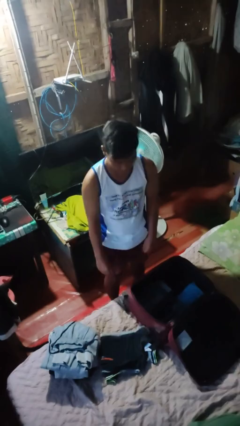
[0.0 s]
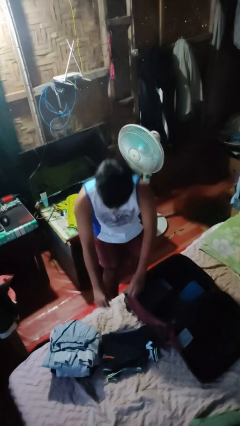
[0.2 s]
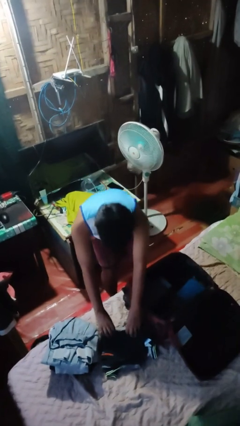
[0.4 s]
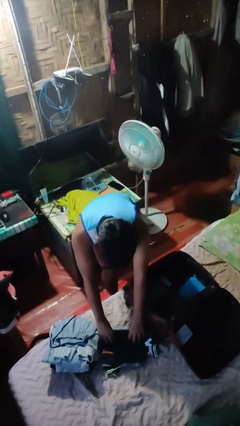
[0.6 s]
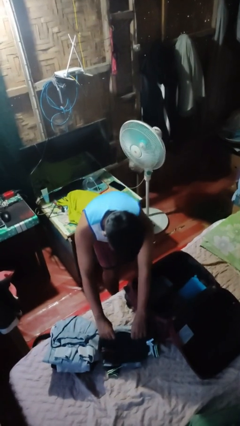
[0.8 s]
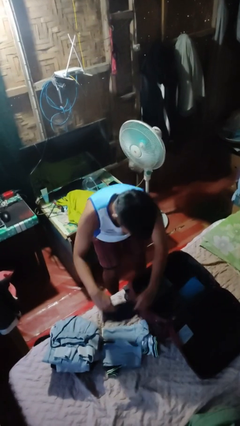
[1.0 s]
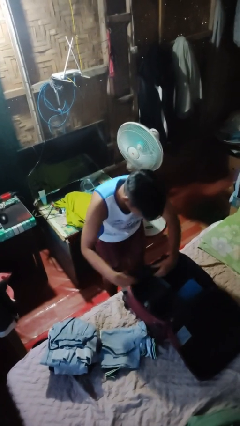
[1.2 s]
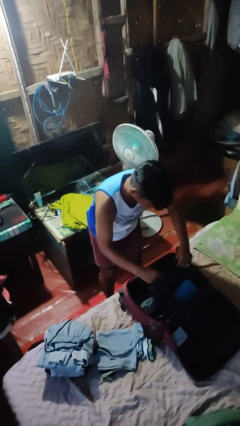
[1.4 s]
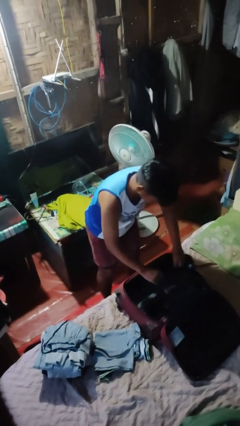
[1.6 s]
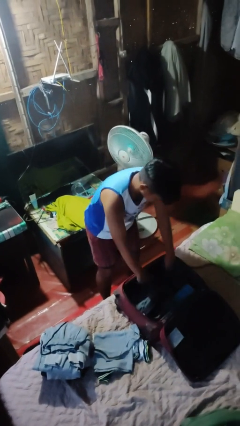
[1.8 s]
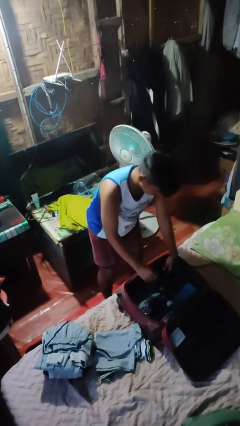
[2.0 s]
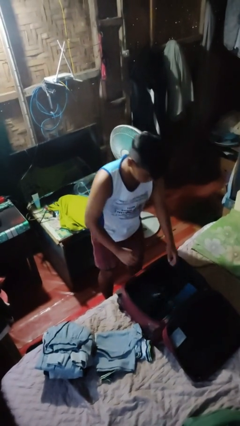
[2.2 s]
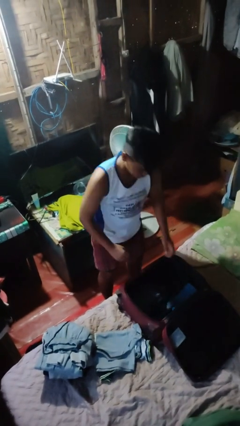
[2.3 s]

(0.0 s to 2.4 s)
person loads clothes into suitcase

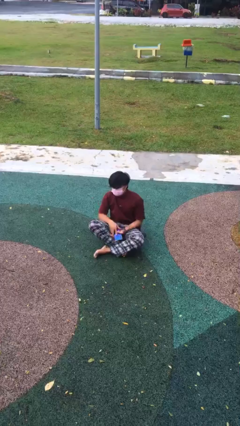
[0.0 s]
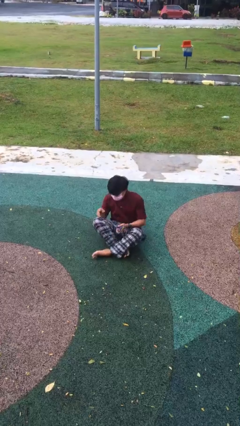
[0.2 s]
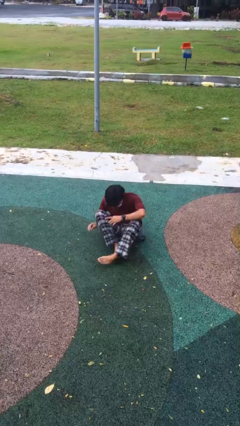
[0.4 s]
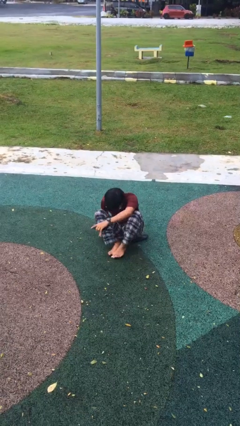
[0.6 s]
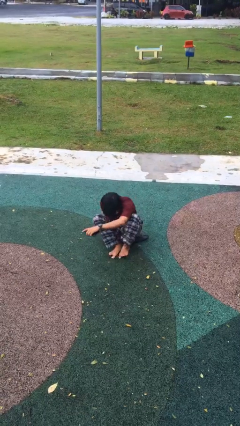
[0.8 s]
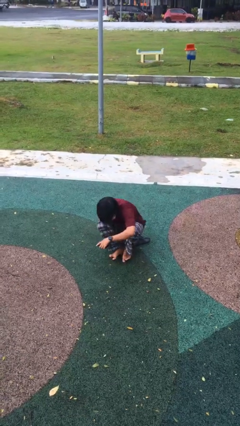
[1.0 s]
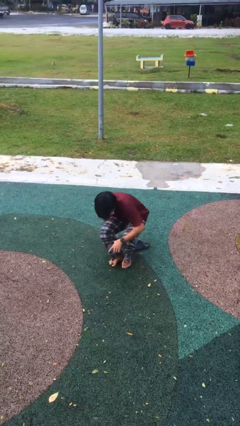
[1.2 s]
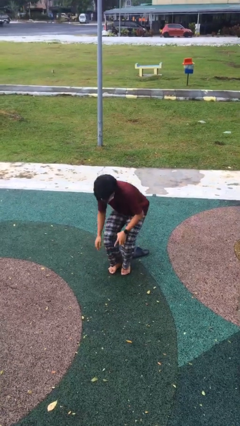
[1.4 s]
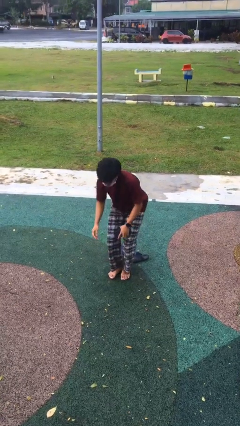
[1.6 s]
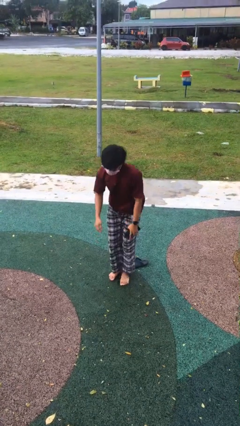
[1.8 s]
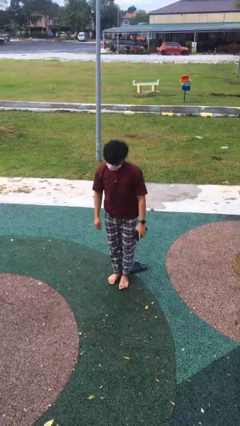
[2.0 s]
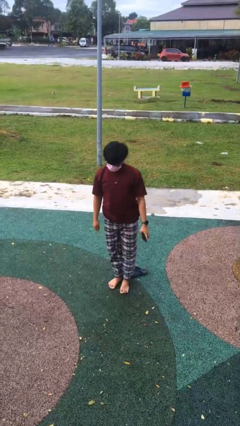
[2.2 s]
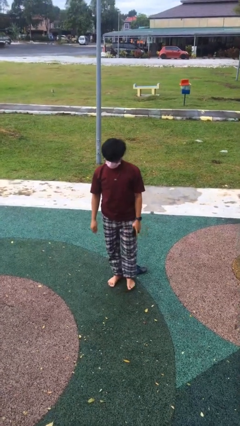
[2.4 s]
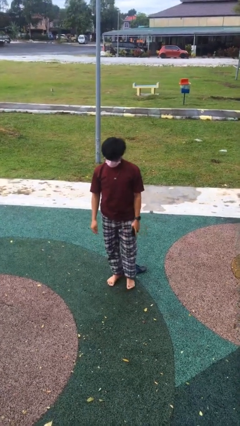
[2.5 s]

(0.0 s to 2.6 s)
person stands up from floor

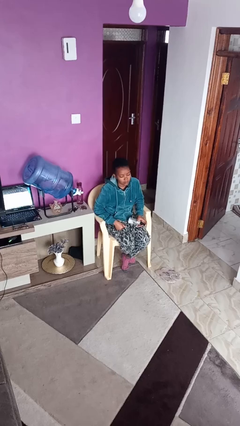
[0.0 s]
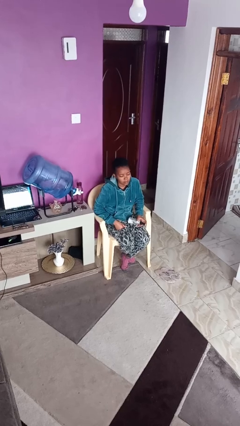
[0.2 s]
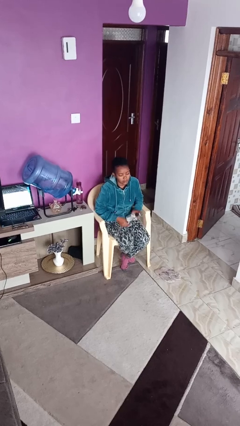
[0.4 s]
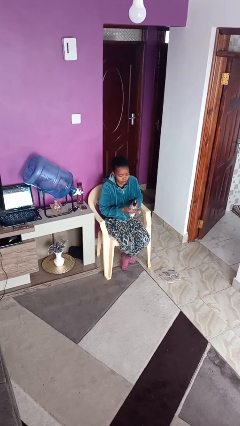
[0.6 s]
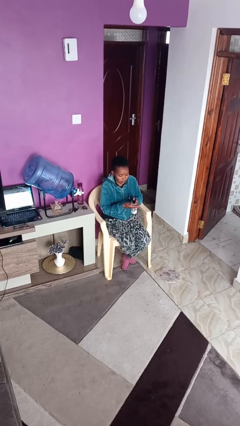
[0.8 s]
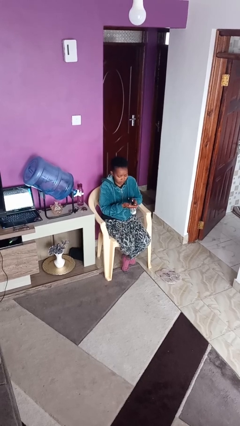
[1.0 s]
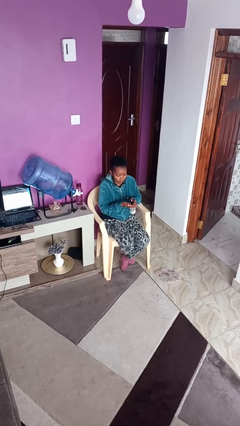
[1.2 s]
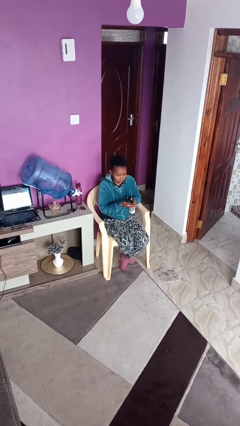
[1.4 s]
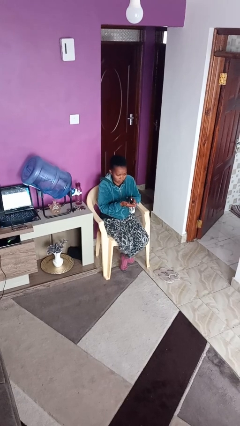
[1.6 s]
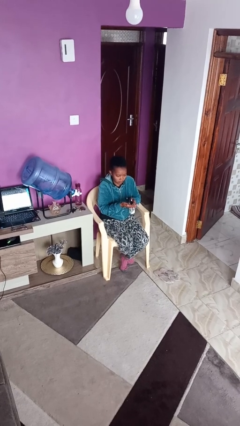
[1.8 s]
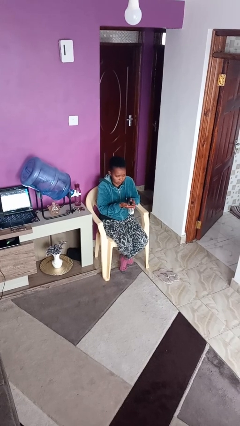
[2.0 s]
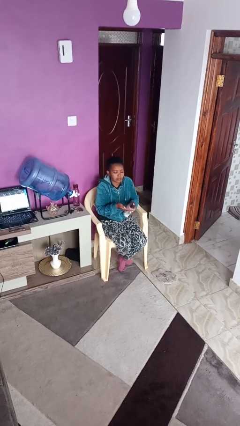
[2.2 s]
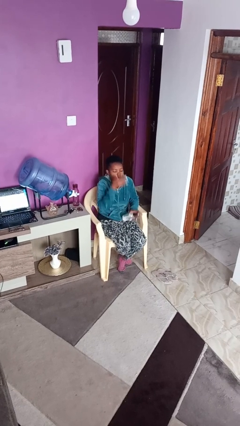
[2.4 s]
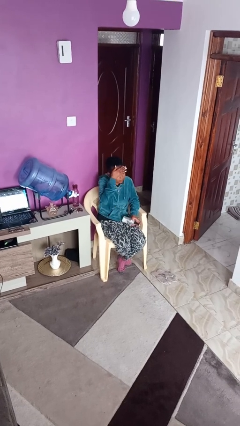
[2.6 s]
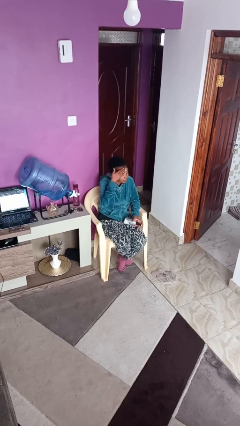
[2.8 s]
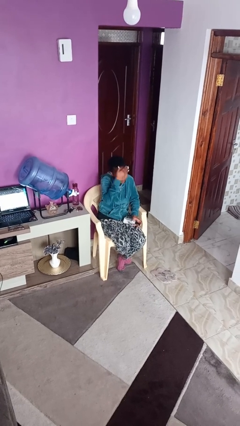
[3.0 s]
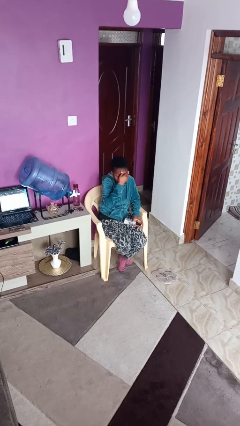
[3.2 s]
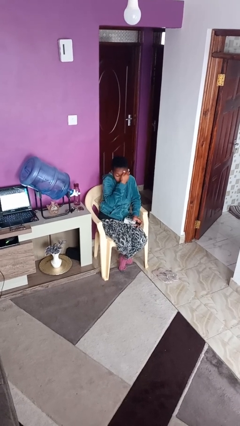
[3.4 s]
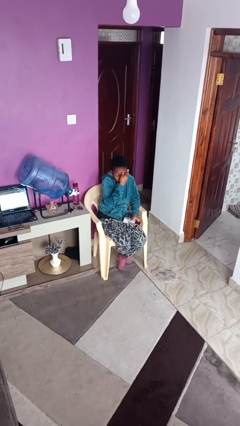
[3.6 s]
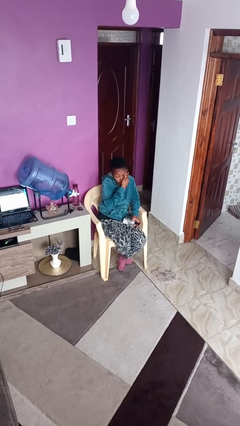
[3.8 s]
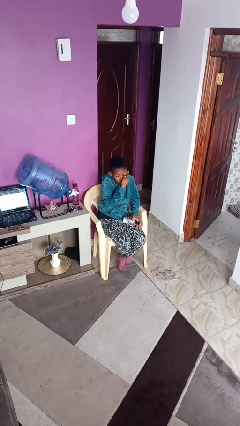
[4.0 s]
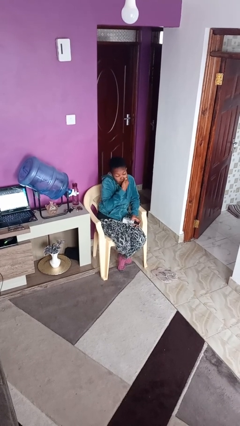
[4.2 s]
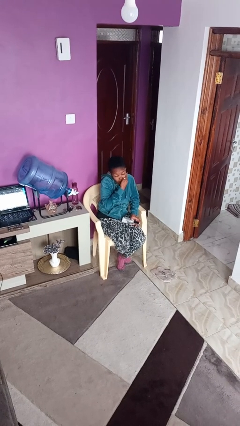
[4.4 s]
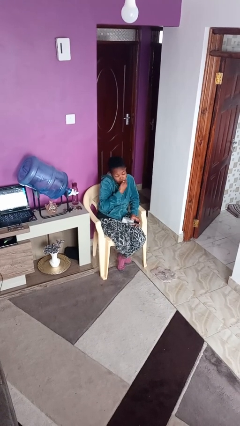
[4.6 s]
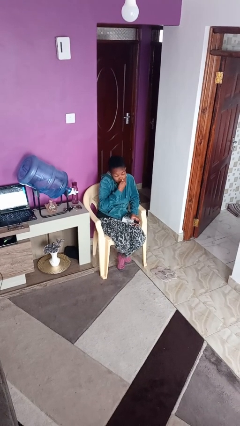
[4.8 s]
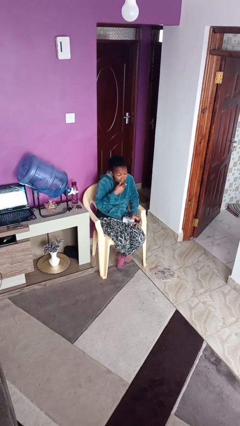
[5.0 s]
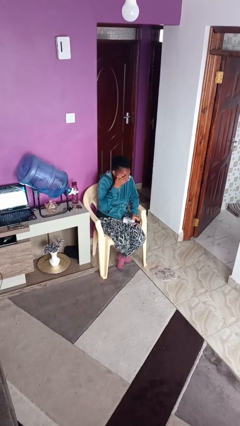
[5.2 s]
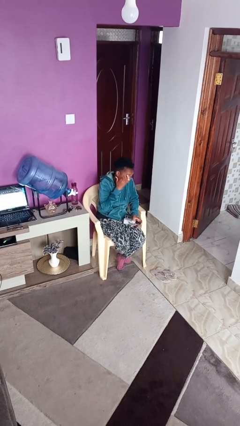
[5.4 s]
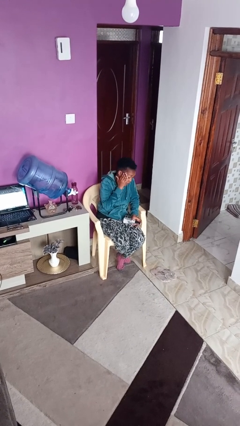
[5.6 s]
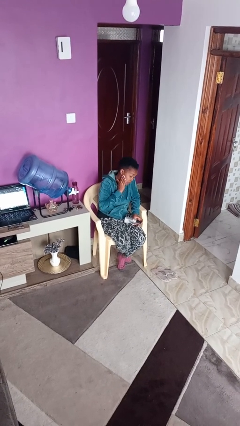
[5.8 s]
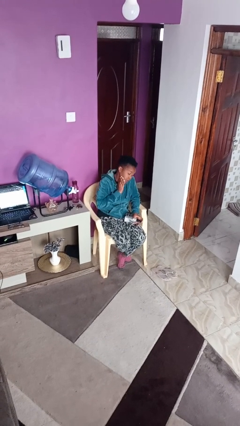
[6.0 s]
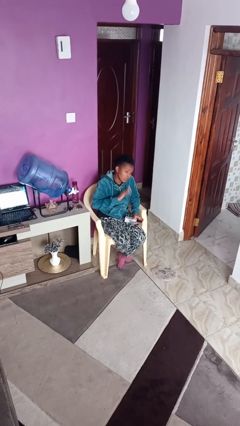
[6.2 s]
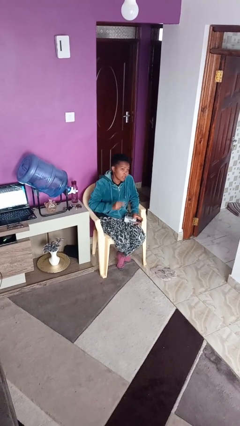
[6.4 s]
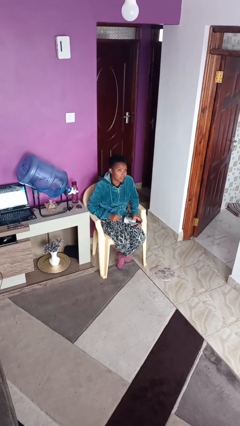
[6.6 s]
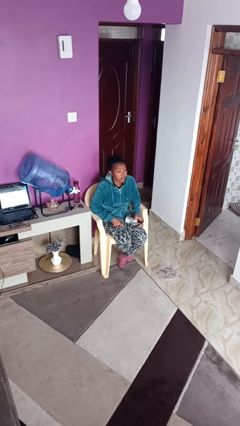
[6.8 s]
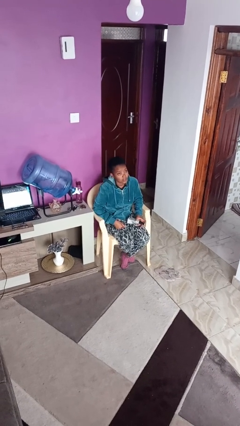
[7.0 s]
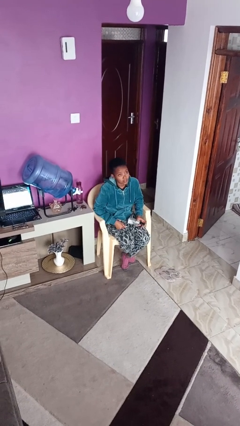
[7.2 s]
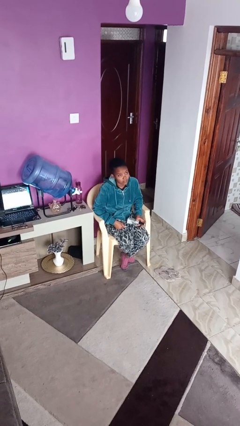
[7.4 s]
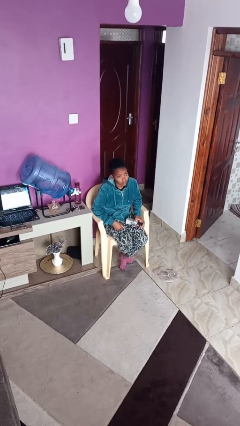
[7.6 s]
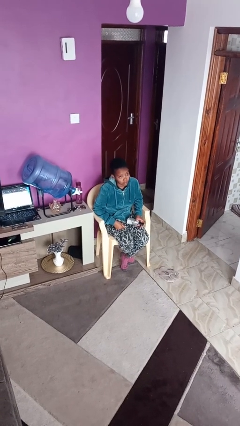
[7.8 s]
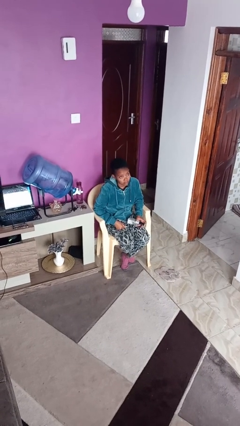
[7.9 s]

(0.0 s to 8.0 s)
person applies facial moisturizer

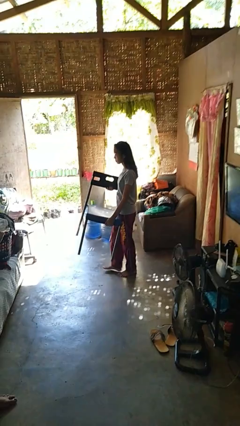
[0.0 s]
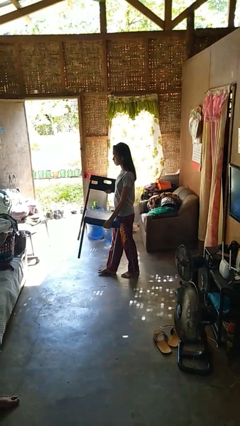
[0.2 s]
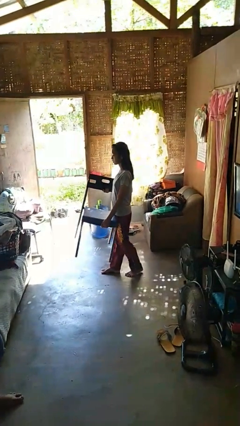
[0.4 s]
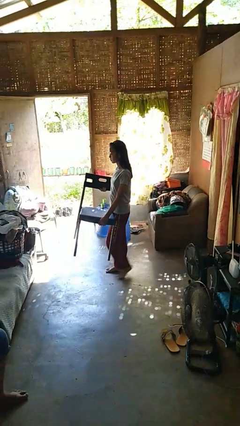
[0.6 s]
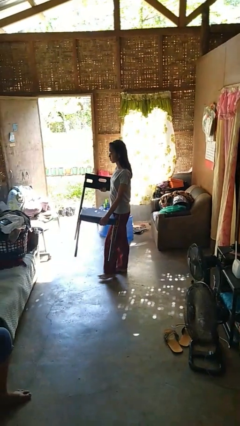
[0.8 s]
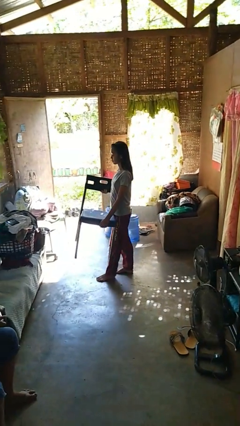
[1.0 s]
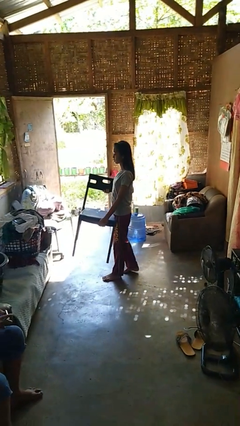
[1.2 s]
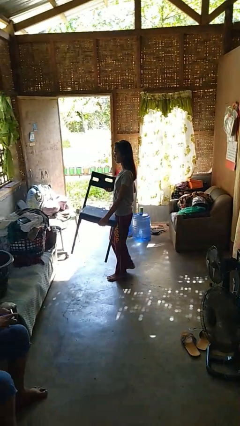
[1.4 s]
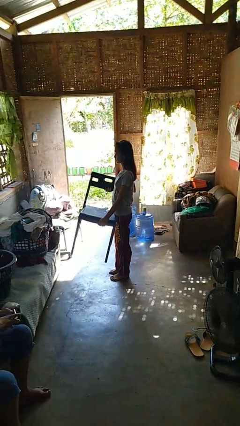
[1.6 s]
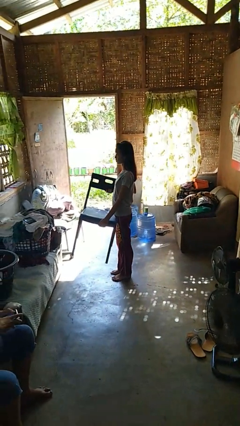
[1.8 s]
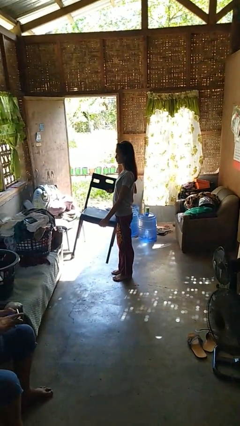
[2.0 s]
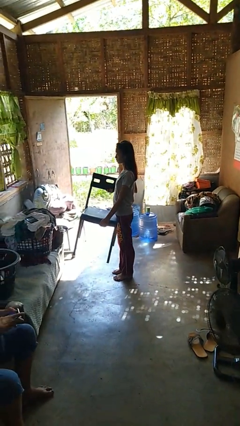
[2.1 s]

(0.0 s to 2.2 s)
person carries furniture

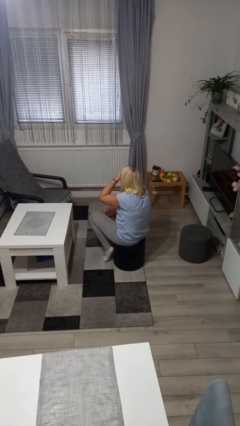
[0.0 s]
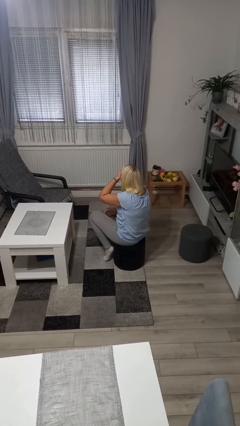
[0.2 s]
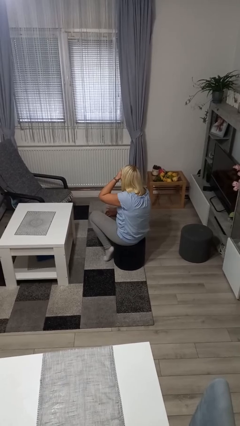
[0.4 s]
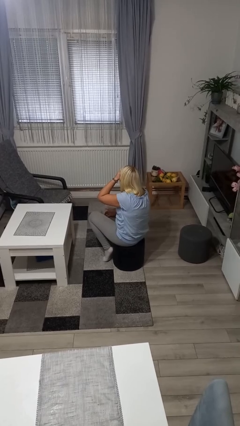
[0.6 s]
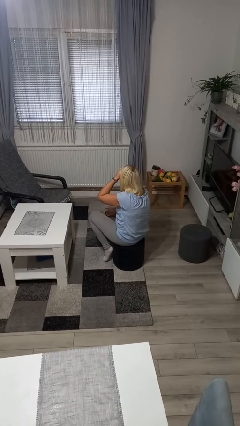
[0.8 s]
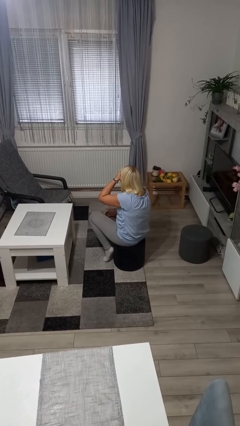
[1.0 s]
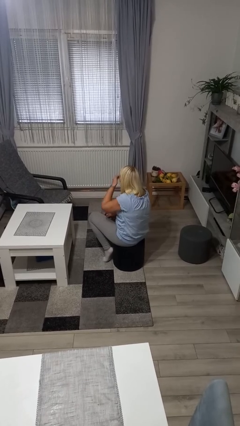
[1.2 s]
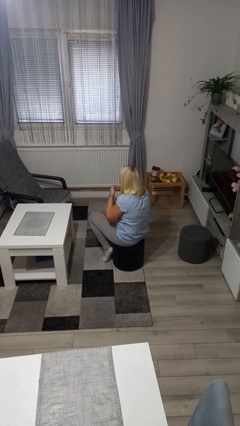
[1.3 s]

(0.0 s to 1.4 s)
person shades eyes

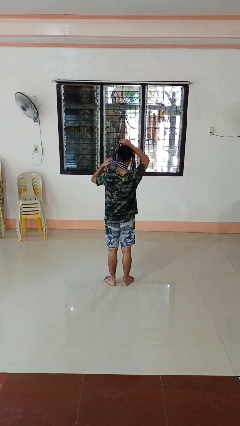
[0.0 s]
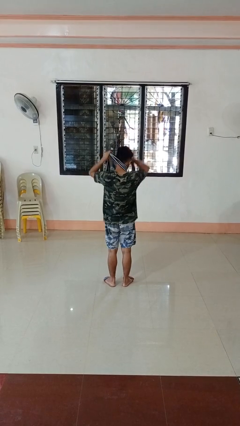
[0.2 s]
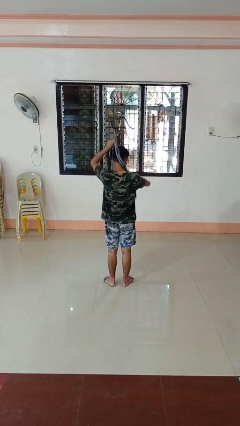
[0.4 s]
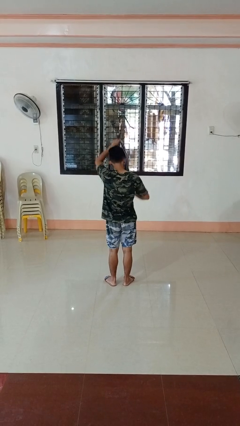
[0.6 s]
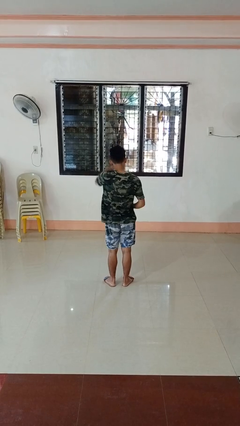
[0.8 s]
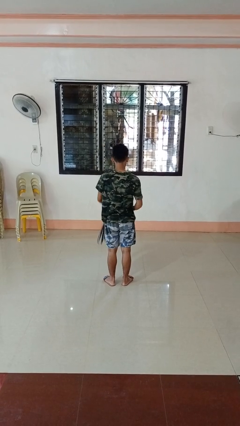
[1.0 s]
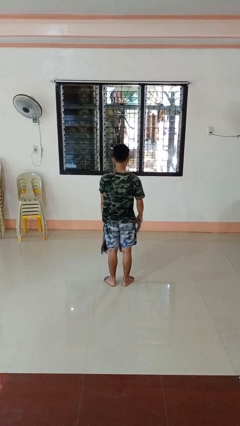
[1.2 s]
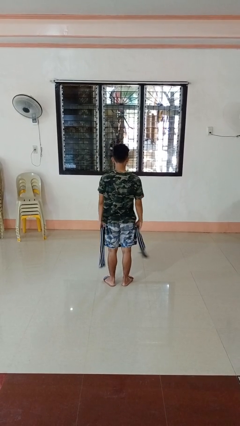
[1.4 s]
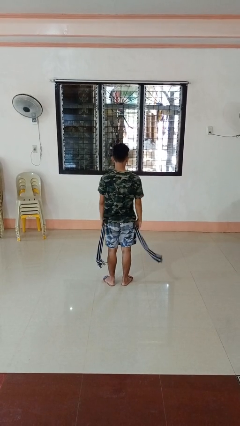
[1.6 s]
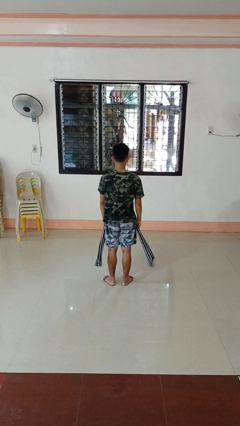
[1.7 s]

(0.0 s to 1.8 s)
person takes off scarf
